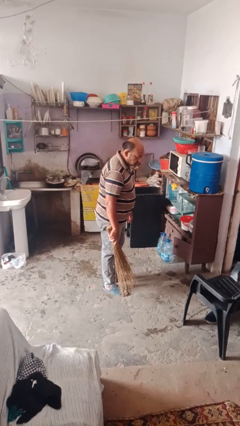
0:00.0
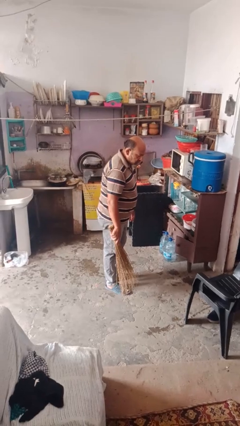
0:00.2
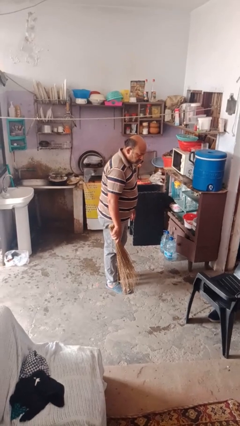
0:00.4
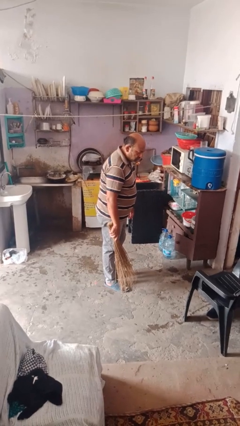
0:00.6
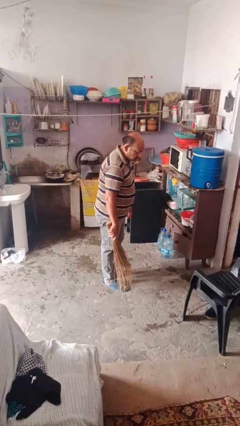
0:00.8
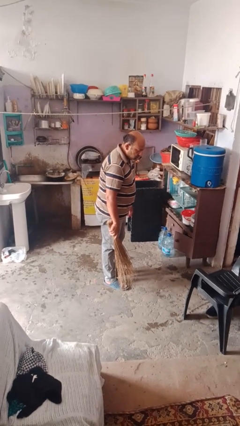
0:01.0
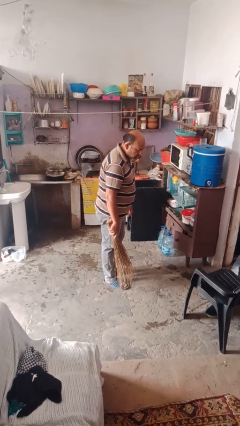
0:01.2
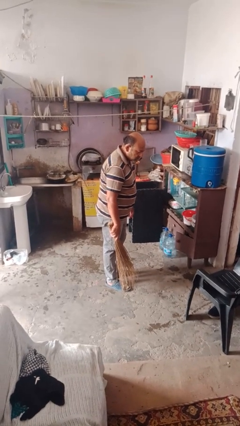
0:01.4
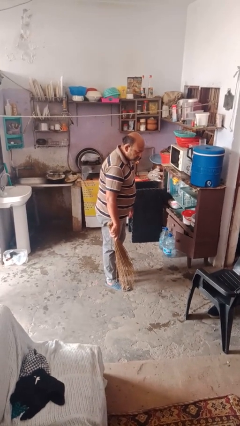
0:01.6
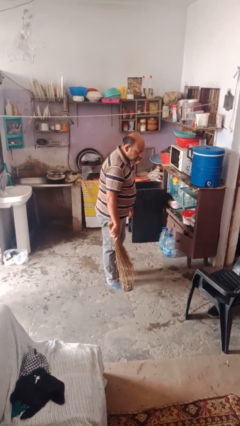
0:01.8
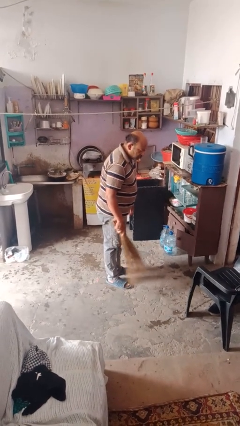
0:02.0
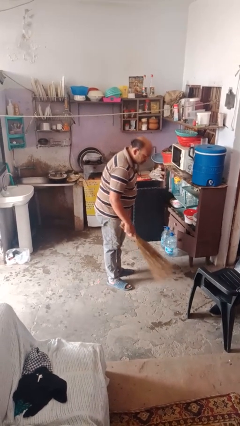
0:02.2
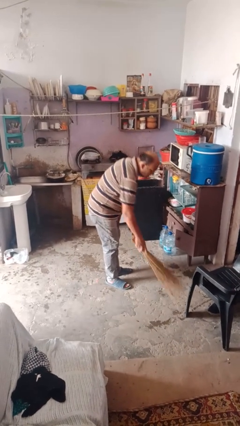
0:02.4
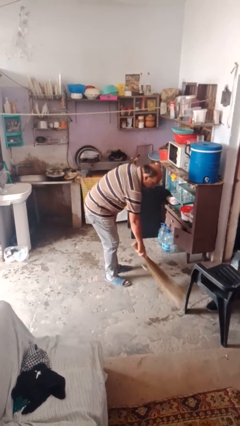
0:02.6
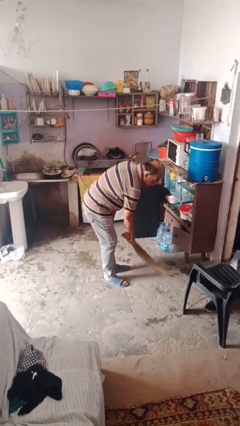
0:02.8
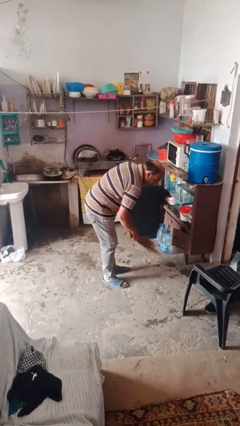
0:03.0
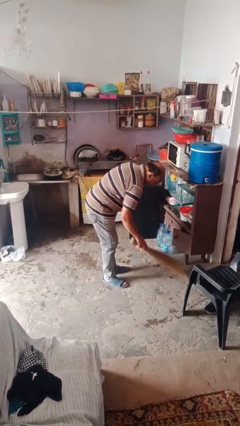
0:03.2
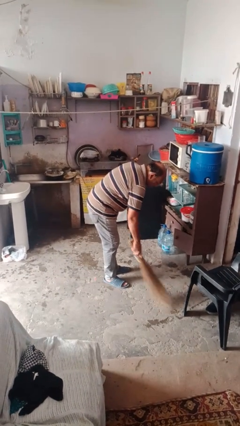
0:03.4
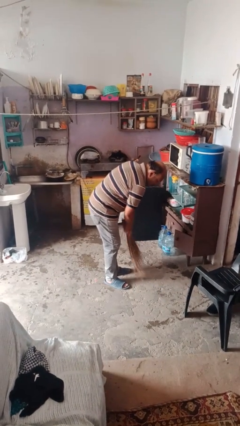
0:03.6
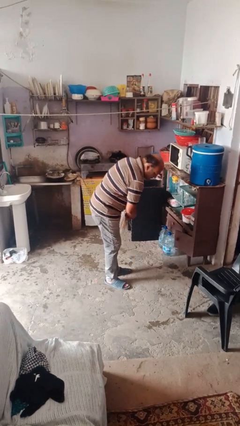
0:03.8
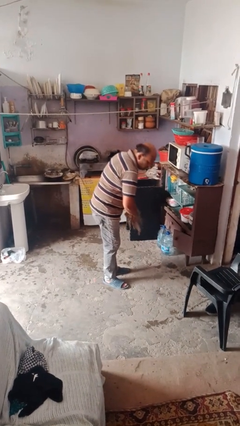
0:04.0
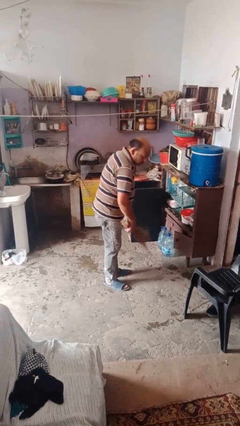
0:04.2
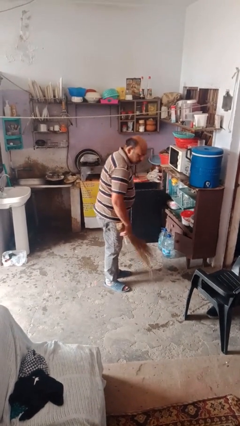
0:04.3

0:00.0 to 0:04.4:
person sweeps floor

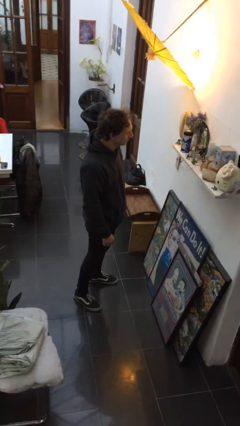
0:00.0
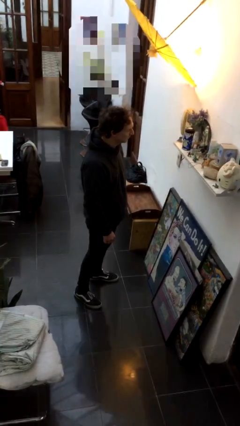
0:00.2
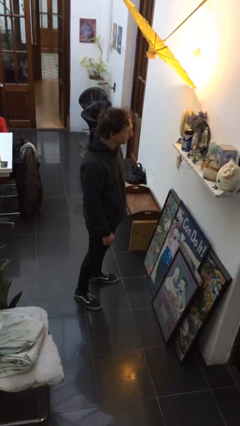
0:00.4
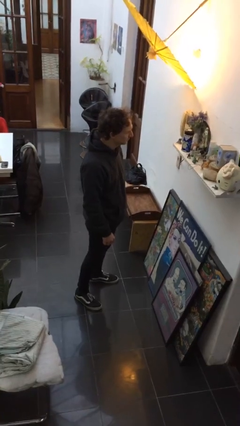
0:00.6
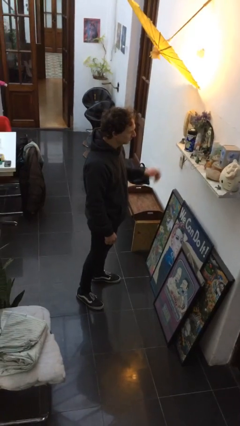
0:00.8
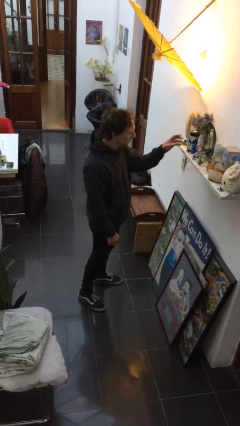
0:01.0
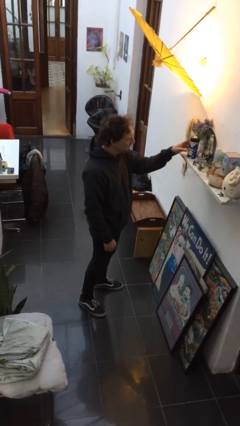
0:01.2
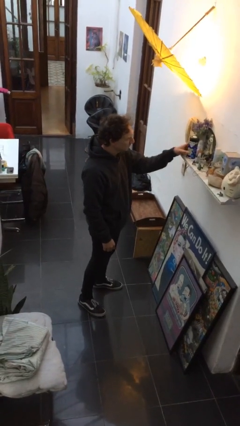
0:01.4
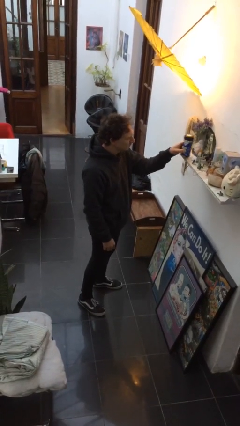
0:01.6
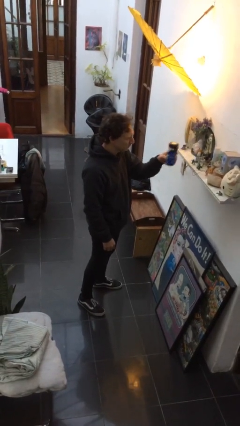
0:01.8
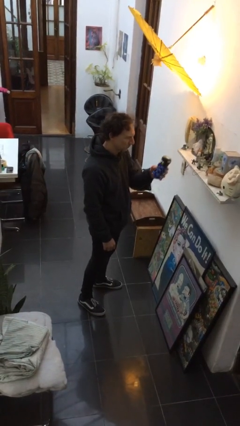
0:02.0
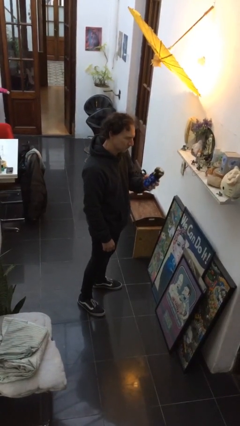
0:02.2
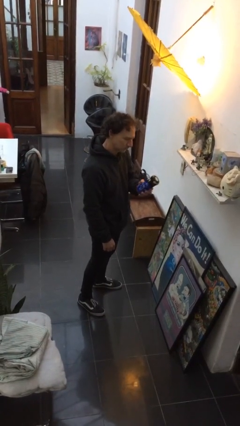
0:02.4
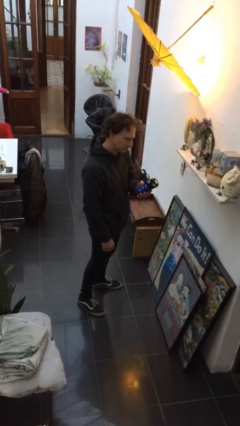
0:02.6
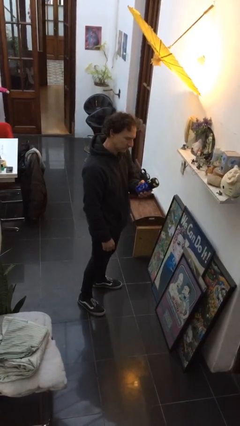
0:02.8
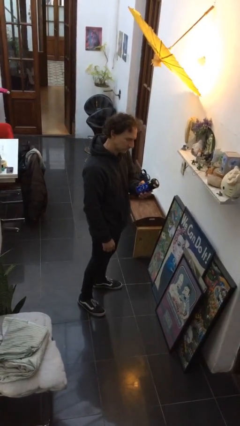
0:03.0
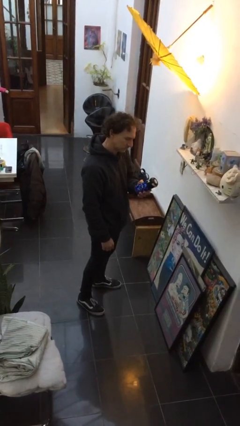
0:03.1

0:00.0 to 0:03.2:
person picks up object from shelf

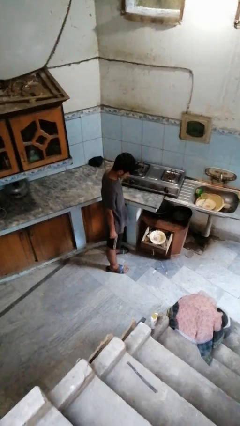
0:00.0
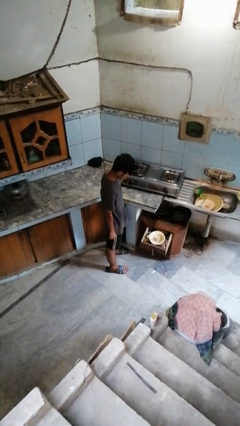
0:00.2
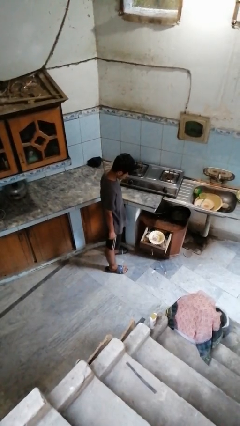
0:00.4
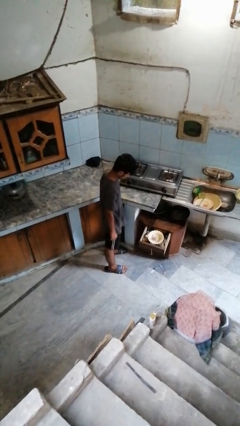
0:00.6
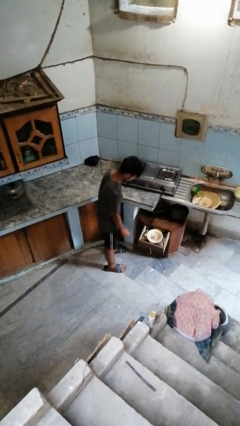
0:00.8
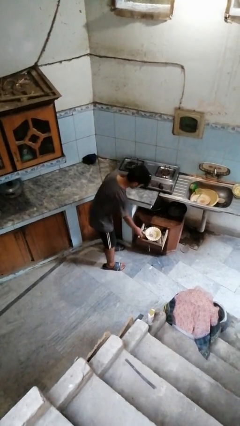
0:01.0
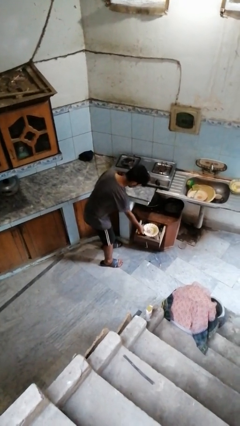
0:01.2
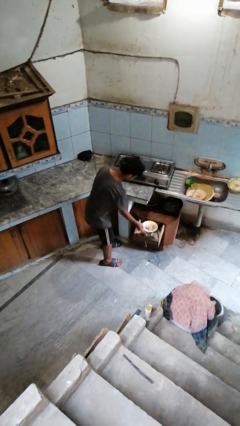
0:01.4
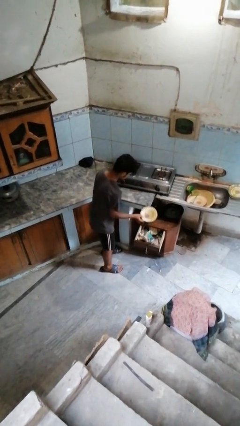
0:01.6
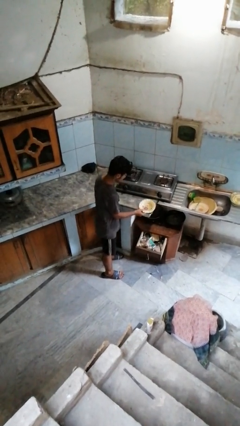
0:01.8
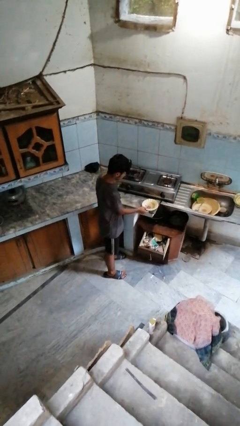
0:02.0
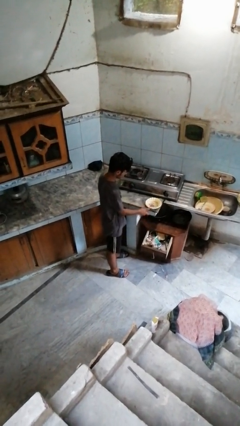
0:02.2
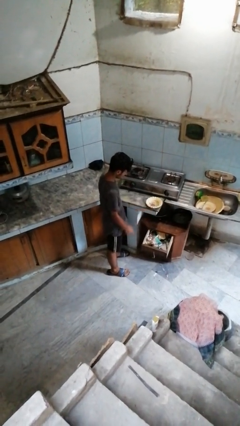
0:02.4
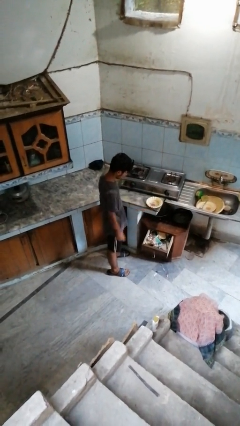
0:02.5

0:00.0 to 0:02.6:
person takes object from kitchen drawer

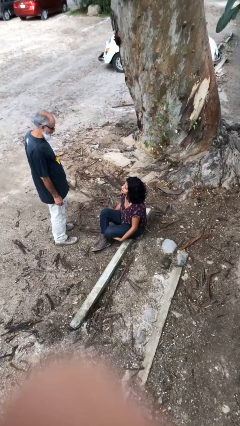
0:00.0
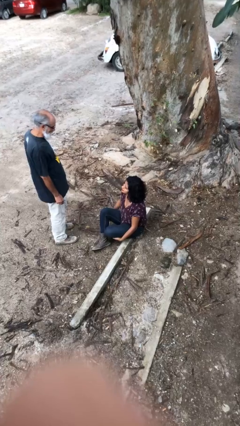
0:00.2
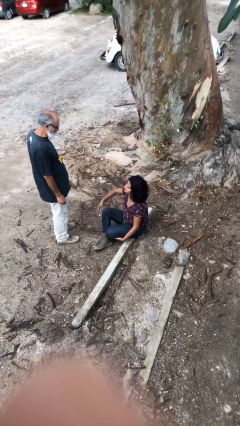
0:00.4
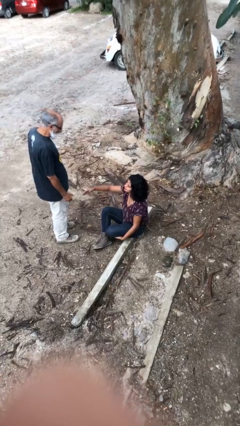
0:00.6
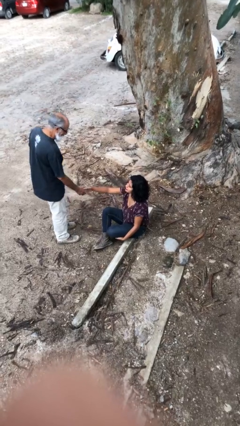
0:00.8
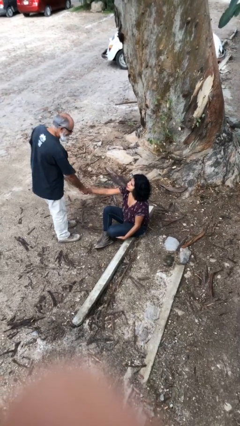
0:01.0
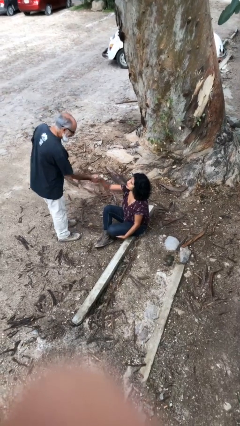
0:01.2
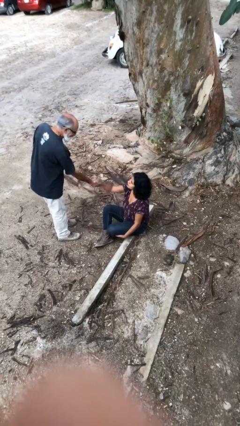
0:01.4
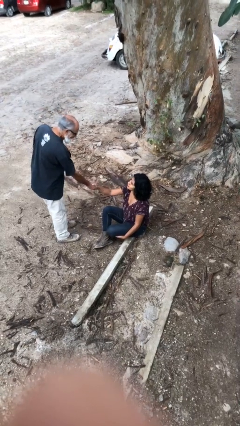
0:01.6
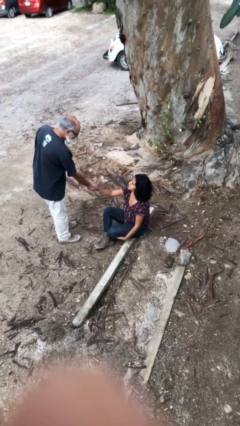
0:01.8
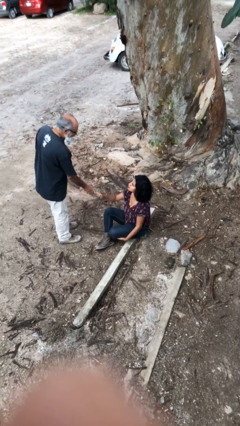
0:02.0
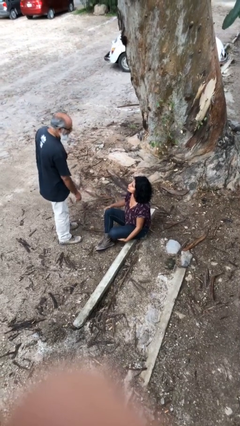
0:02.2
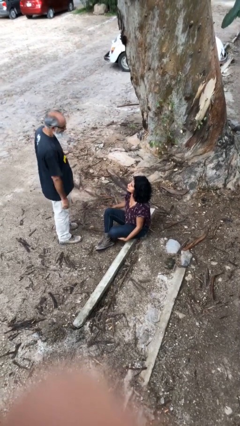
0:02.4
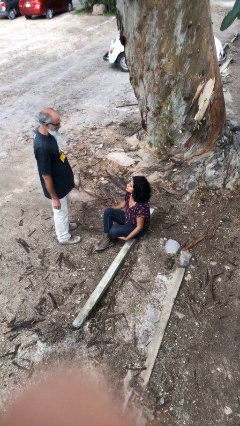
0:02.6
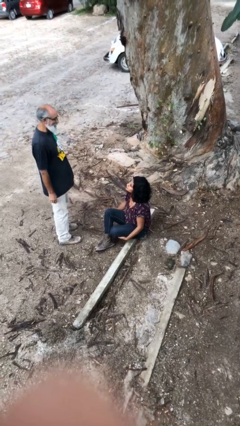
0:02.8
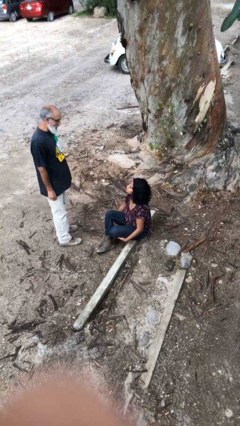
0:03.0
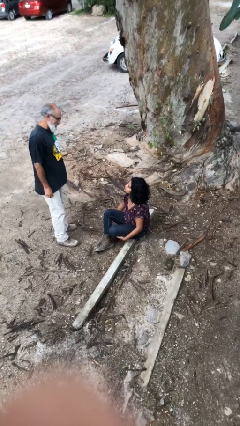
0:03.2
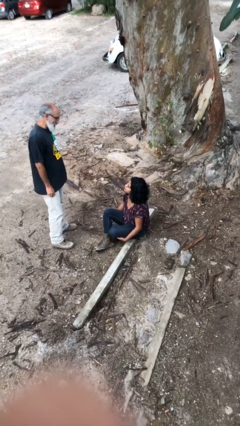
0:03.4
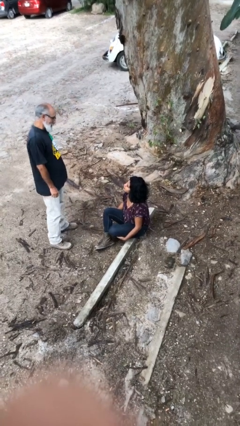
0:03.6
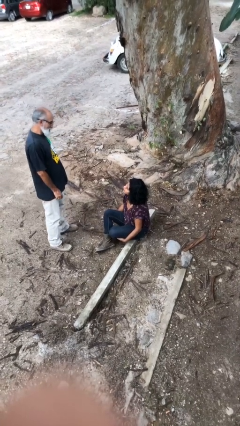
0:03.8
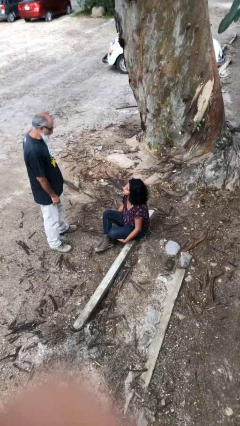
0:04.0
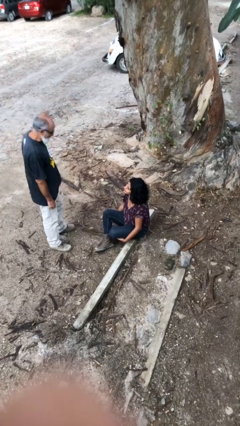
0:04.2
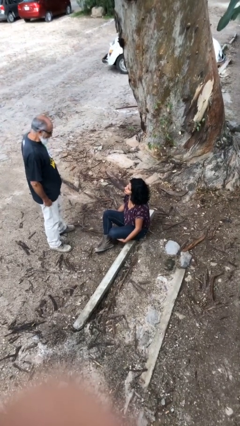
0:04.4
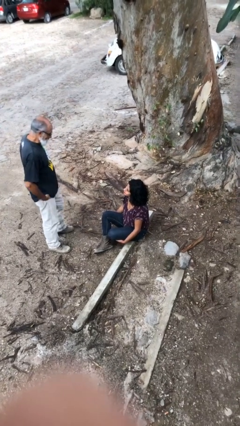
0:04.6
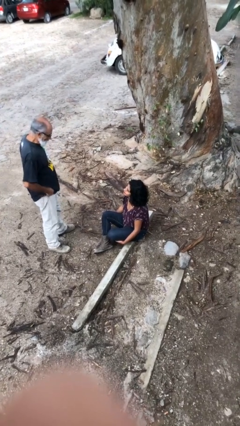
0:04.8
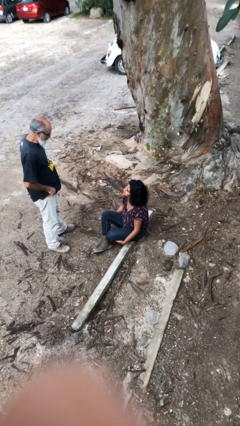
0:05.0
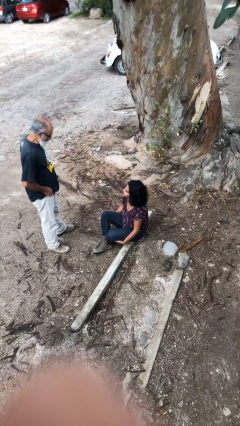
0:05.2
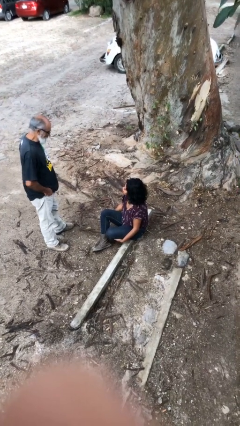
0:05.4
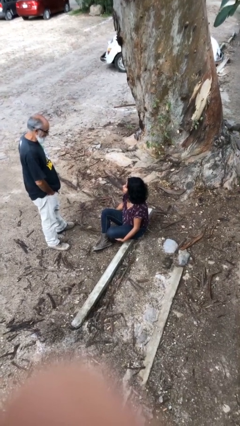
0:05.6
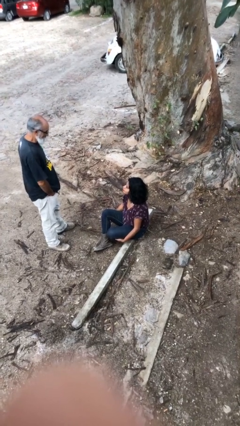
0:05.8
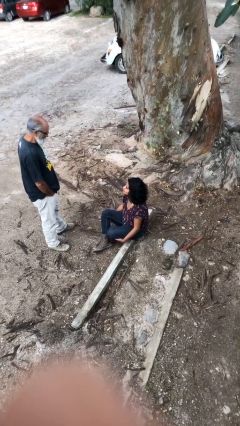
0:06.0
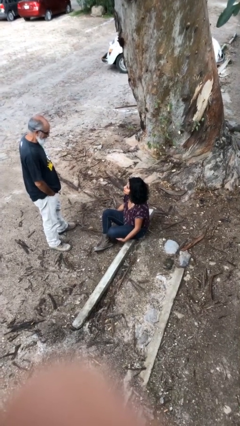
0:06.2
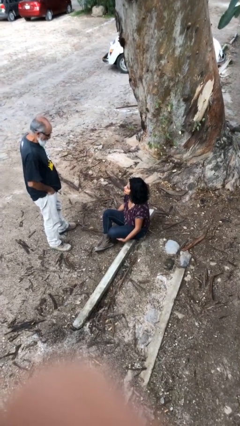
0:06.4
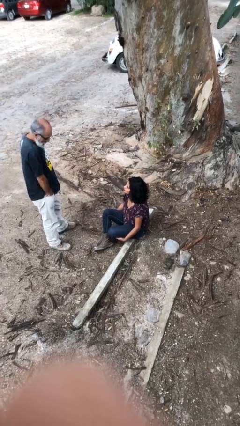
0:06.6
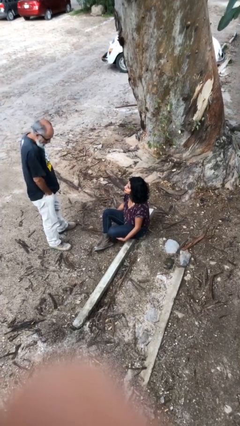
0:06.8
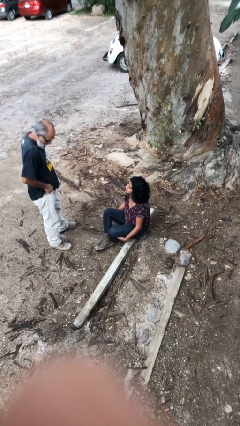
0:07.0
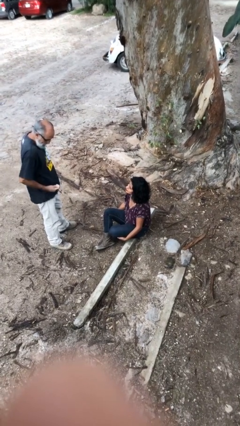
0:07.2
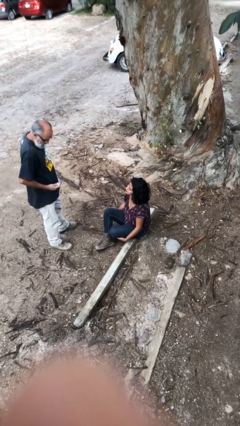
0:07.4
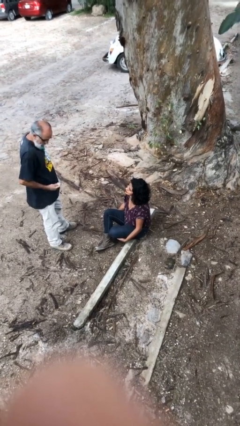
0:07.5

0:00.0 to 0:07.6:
person shakes hand

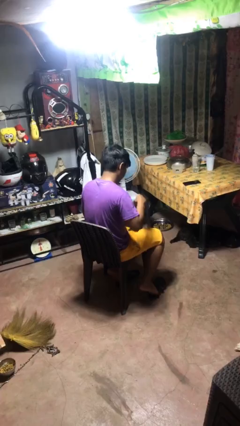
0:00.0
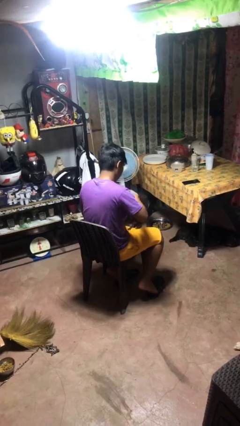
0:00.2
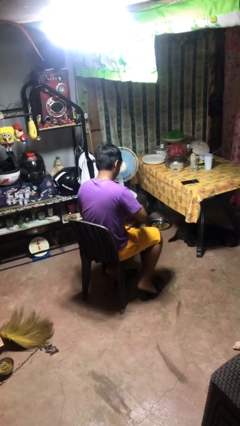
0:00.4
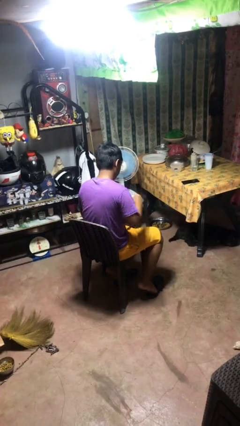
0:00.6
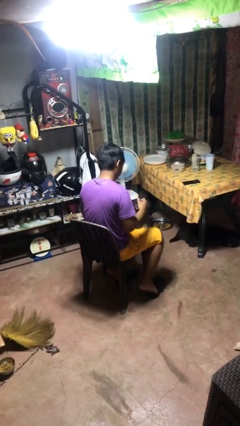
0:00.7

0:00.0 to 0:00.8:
person puts object into purse
